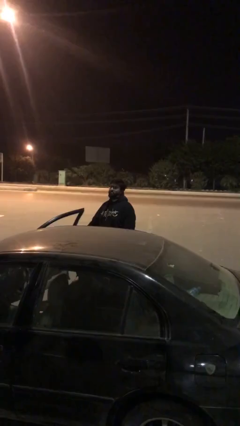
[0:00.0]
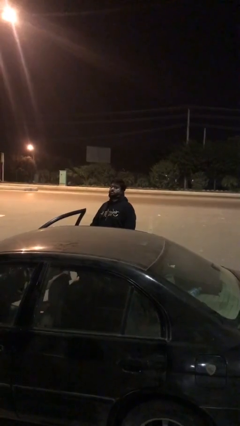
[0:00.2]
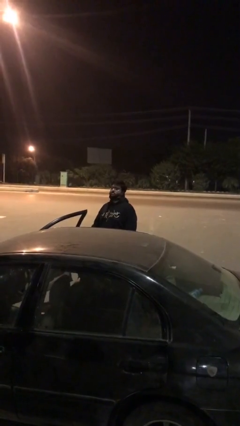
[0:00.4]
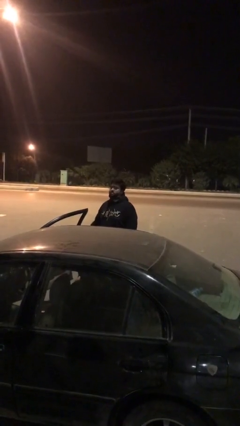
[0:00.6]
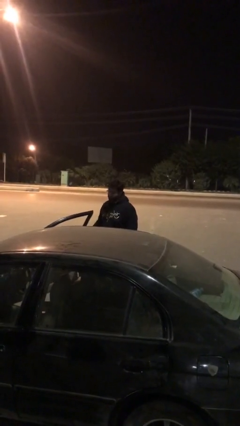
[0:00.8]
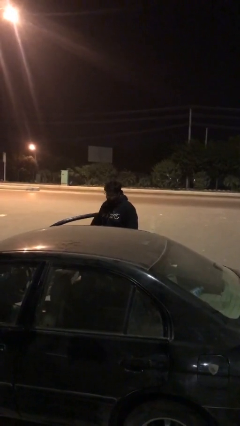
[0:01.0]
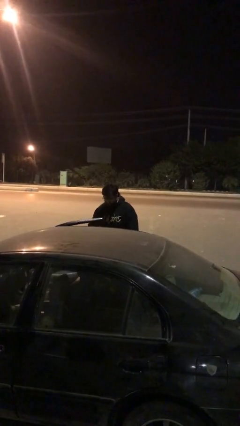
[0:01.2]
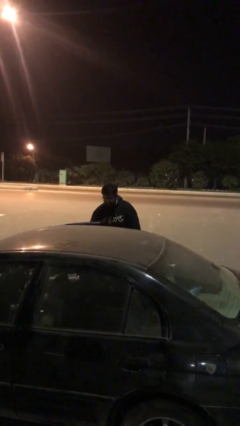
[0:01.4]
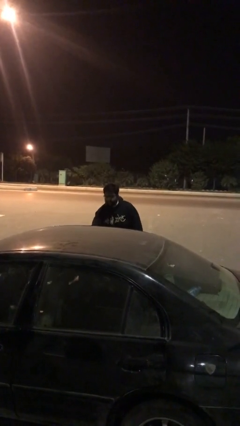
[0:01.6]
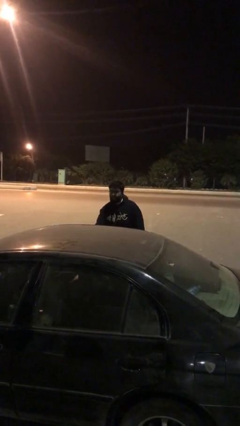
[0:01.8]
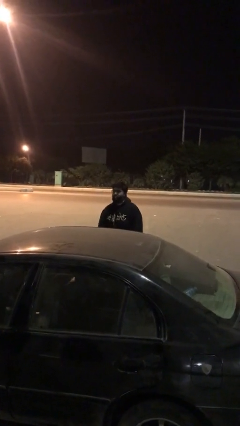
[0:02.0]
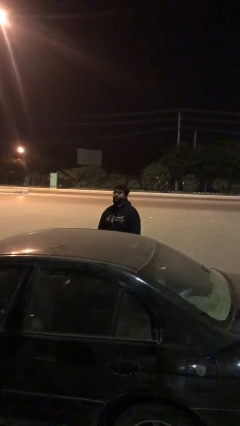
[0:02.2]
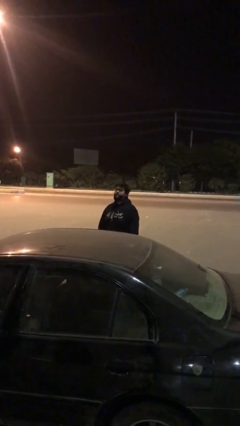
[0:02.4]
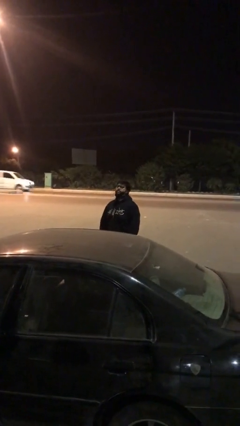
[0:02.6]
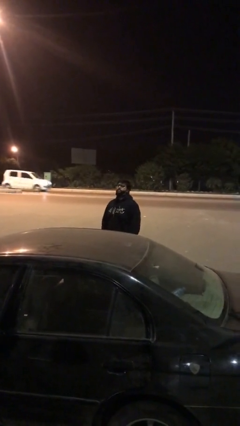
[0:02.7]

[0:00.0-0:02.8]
person closes car door

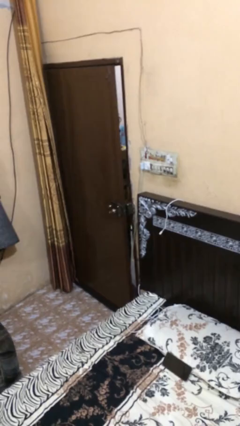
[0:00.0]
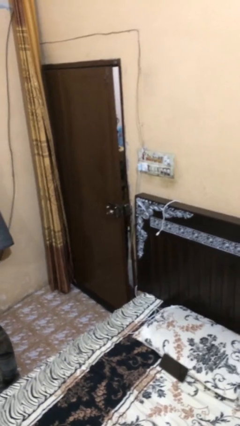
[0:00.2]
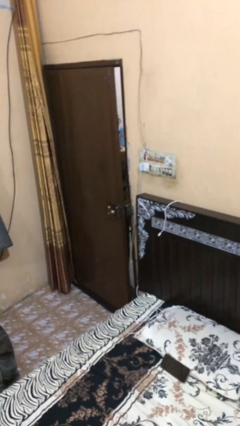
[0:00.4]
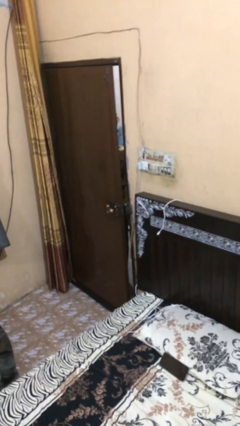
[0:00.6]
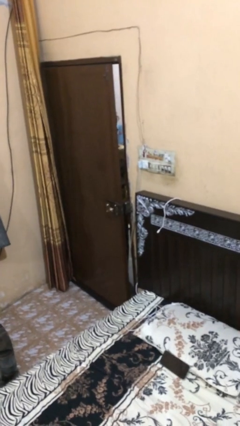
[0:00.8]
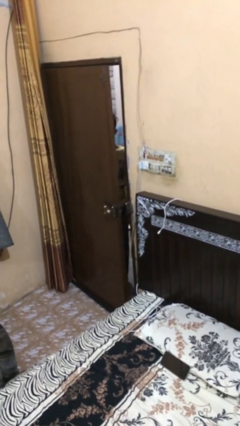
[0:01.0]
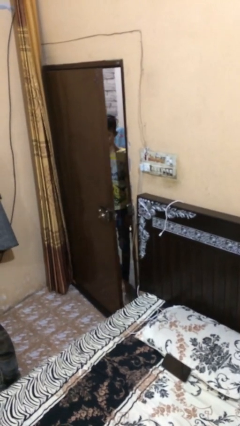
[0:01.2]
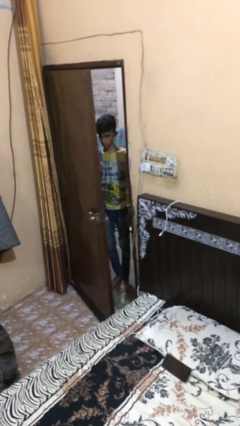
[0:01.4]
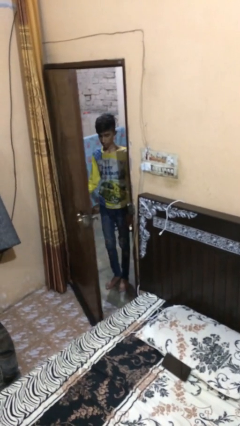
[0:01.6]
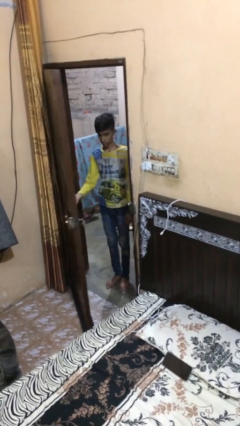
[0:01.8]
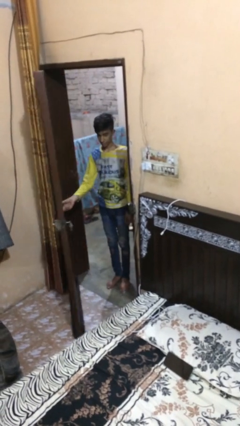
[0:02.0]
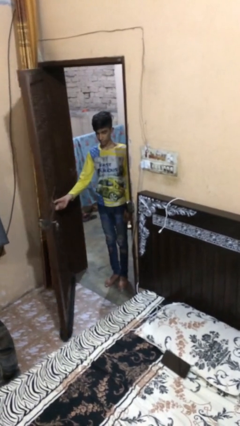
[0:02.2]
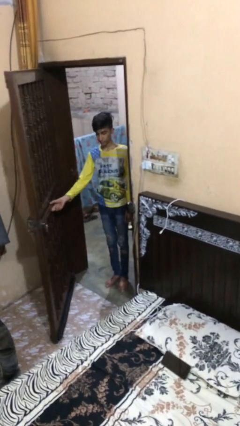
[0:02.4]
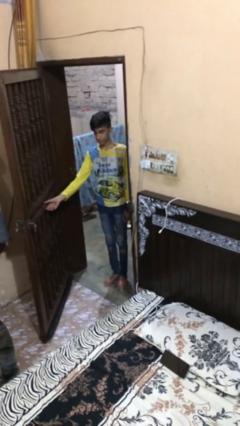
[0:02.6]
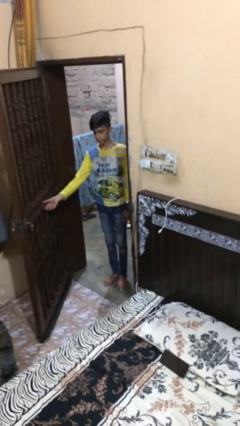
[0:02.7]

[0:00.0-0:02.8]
person opens facility door

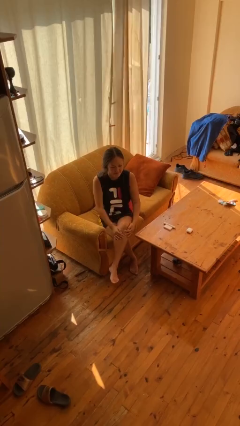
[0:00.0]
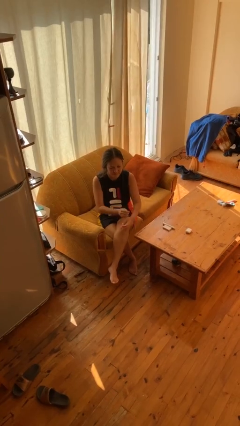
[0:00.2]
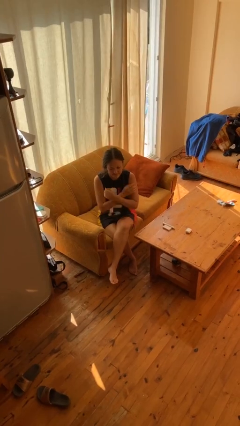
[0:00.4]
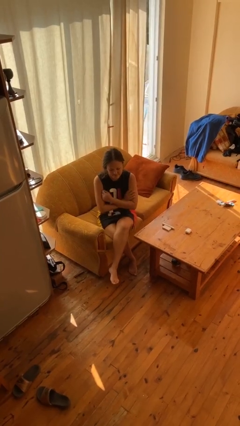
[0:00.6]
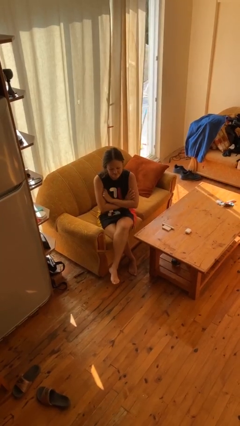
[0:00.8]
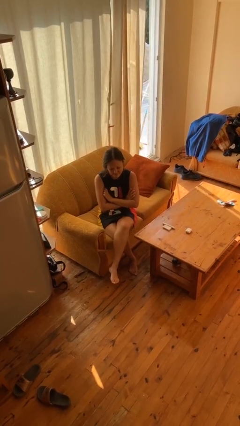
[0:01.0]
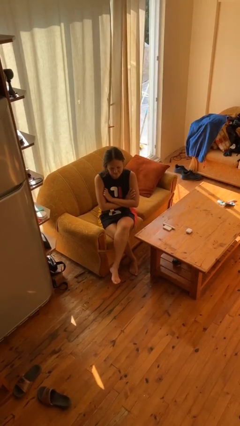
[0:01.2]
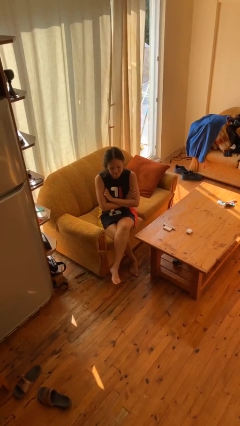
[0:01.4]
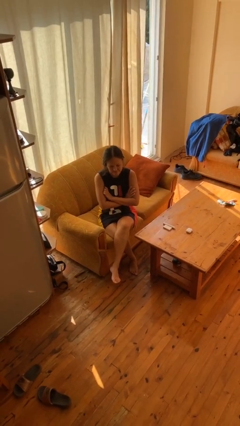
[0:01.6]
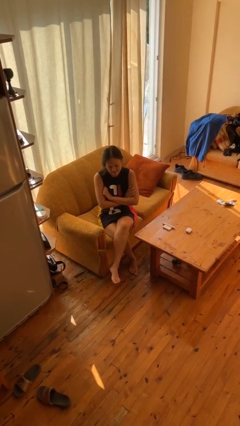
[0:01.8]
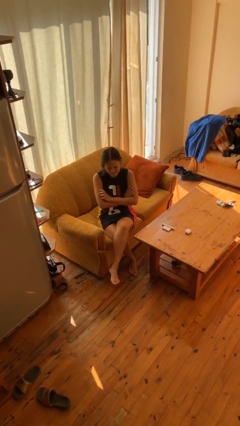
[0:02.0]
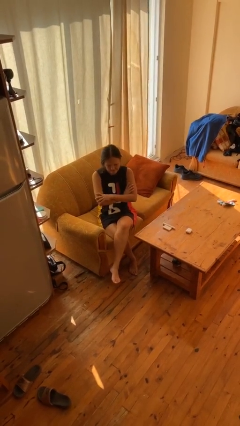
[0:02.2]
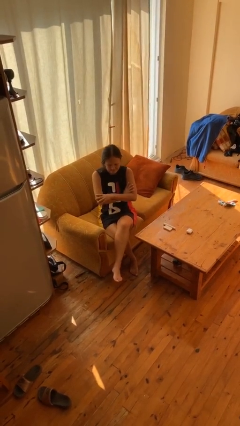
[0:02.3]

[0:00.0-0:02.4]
person crosses arms

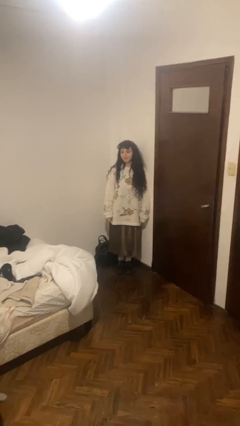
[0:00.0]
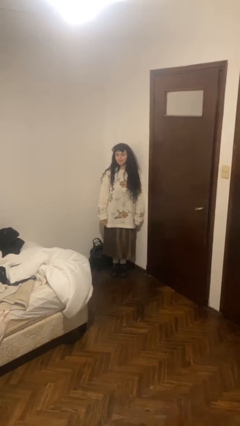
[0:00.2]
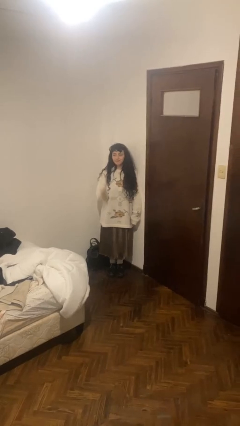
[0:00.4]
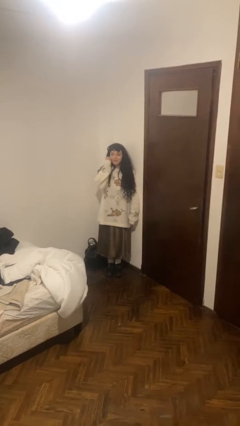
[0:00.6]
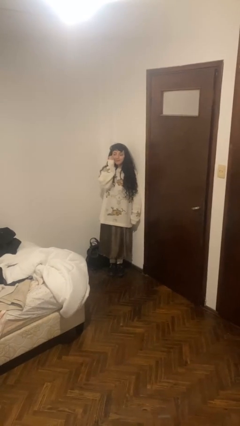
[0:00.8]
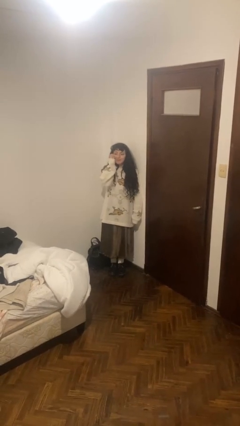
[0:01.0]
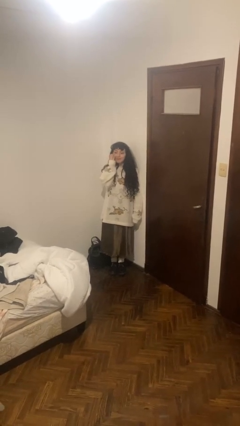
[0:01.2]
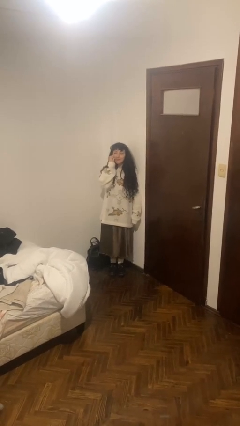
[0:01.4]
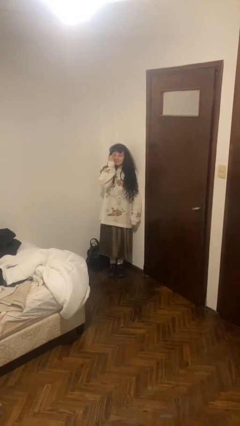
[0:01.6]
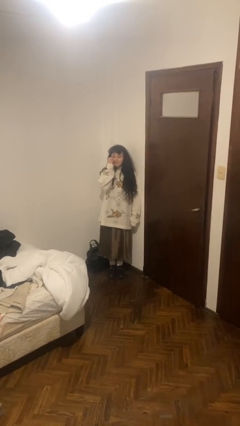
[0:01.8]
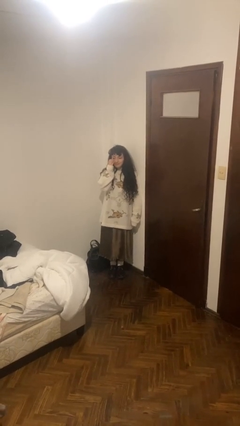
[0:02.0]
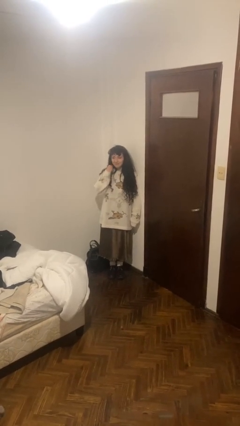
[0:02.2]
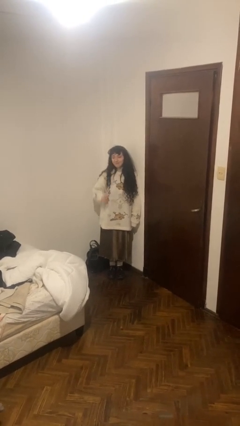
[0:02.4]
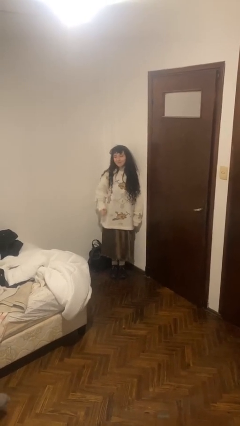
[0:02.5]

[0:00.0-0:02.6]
person scratches face

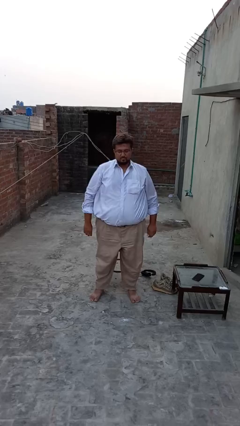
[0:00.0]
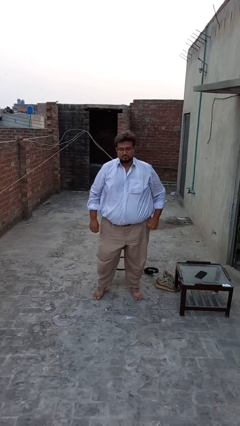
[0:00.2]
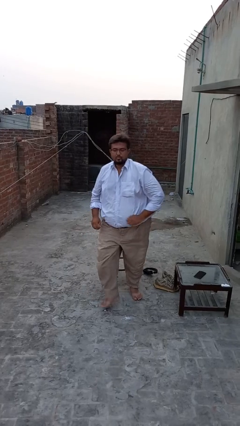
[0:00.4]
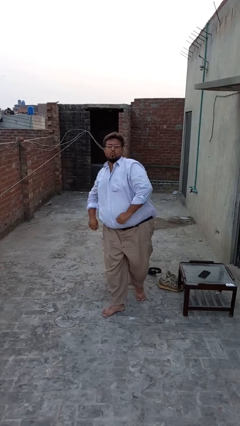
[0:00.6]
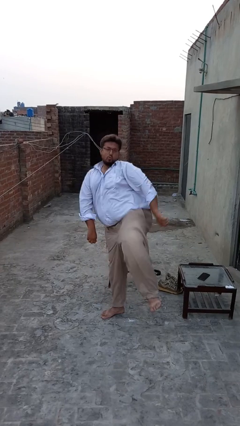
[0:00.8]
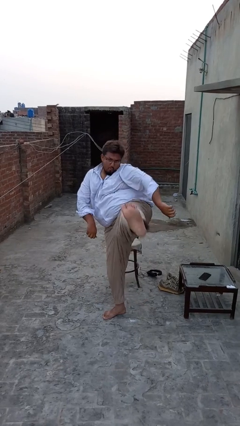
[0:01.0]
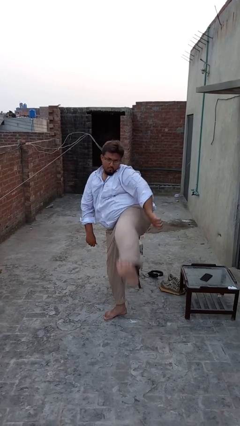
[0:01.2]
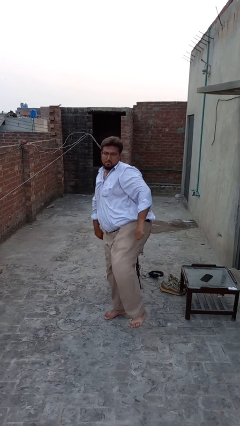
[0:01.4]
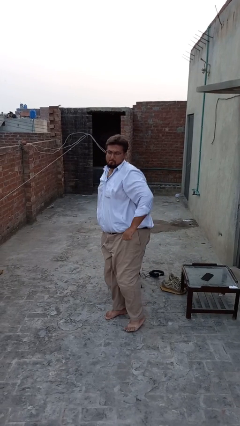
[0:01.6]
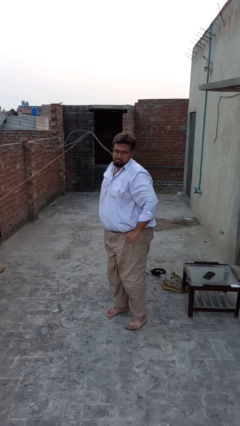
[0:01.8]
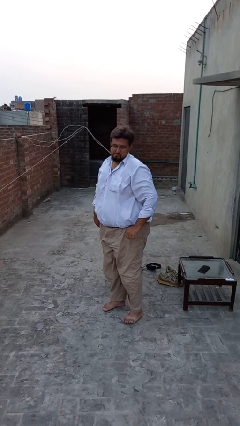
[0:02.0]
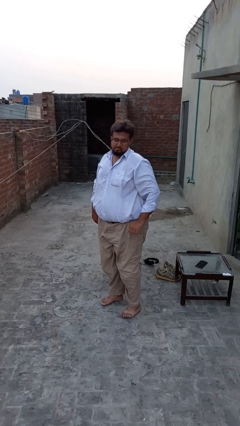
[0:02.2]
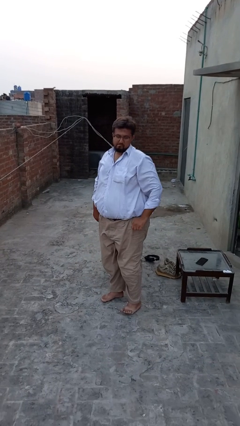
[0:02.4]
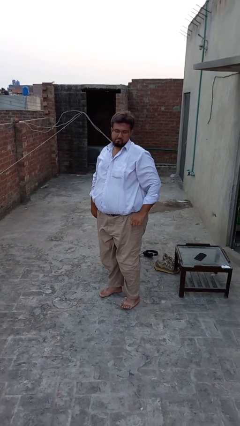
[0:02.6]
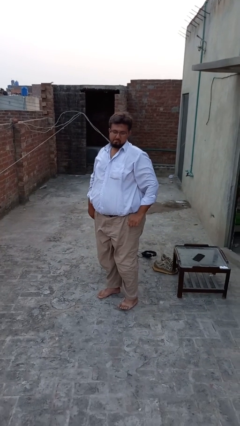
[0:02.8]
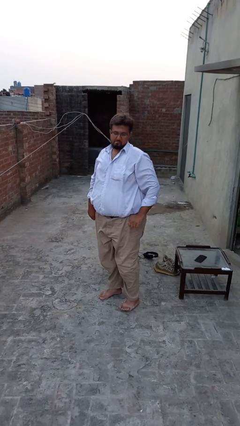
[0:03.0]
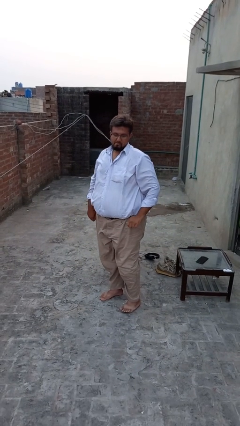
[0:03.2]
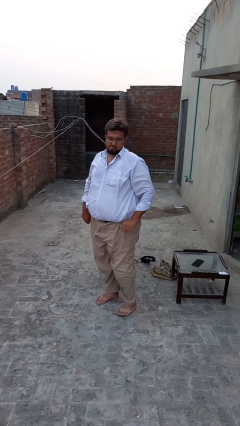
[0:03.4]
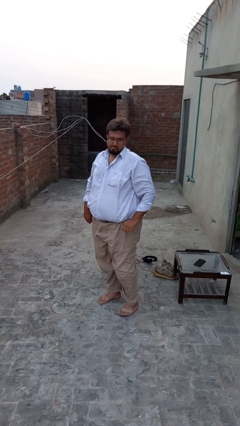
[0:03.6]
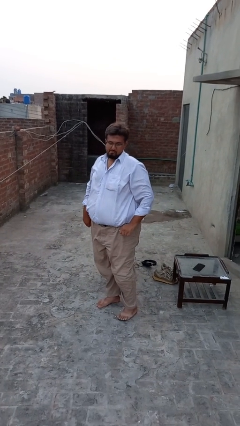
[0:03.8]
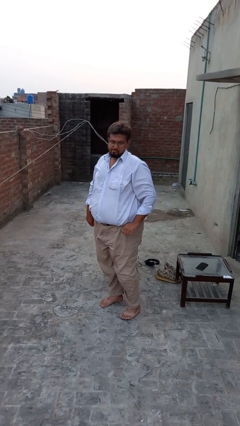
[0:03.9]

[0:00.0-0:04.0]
person karate kicks

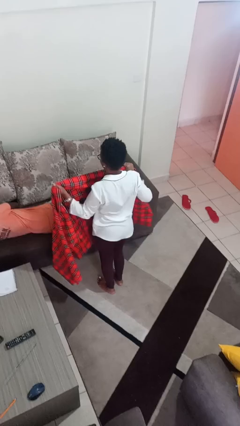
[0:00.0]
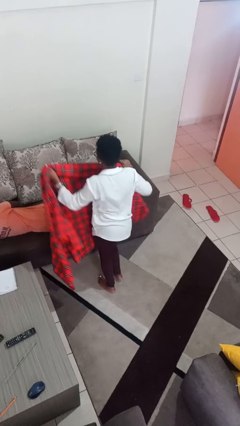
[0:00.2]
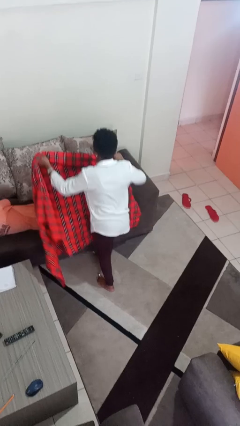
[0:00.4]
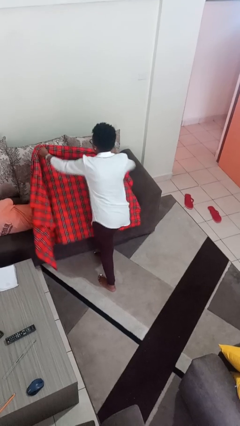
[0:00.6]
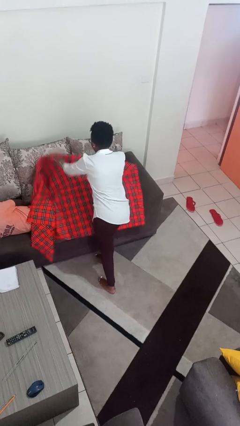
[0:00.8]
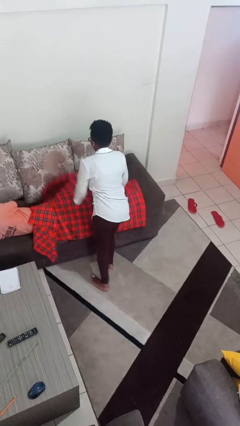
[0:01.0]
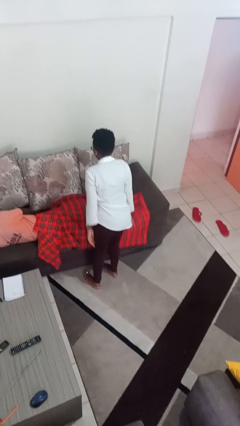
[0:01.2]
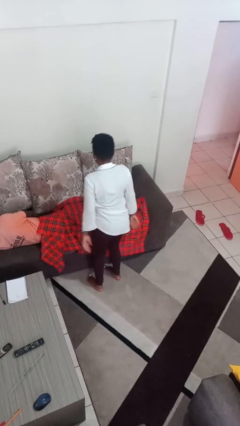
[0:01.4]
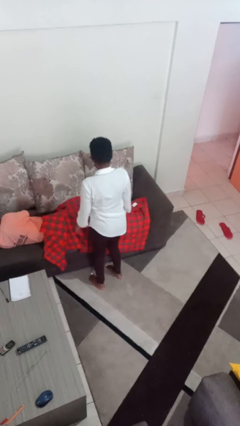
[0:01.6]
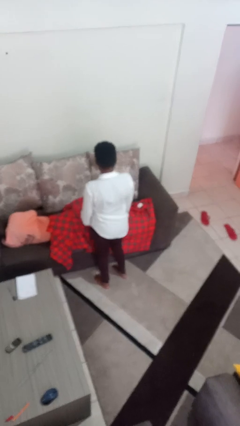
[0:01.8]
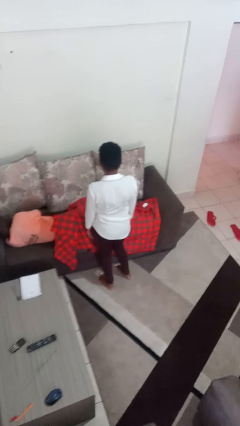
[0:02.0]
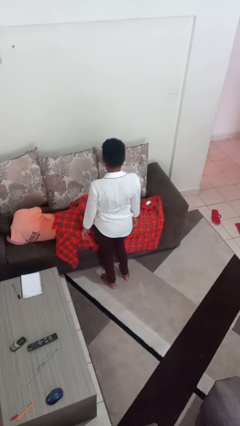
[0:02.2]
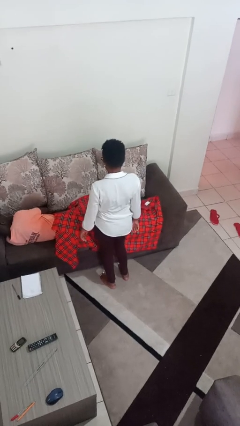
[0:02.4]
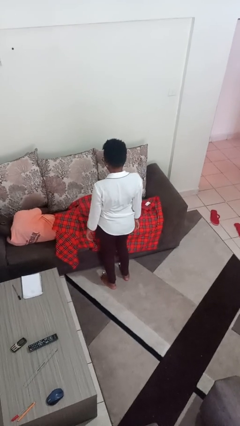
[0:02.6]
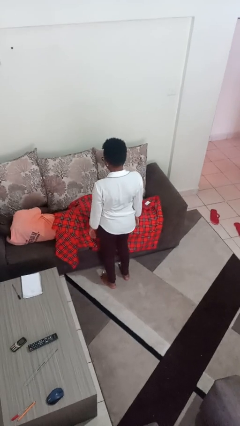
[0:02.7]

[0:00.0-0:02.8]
person covers friend with blanket
